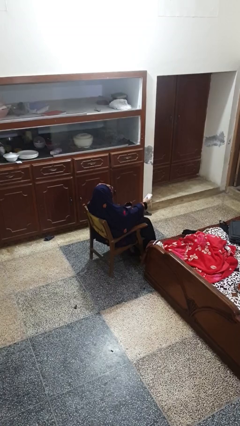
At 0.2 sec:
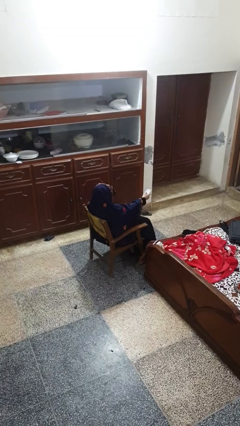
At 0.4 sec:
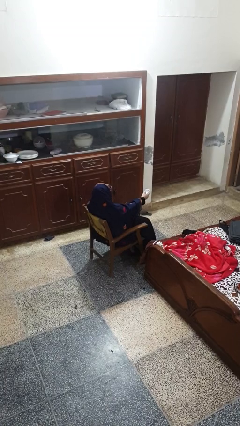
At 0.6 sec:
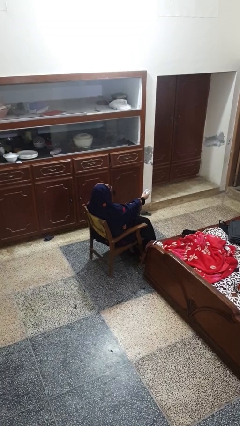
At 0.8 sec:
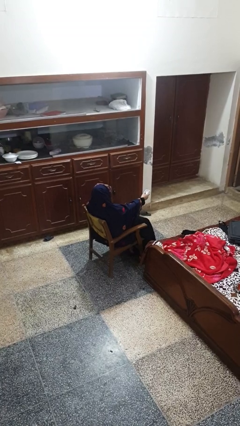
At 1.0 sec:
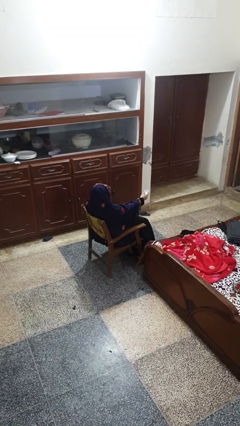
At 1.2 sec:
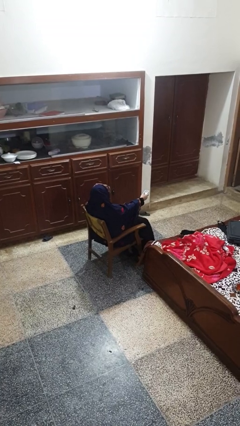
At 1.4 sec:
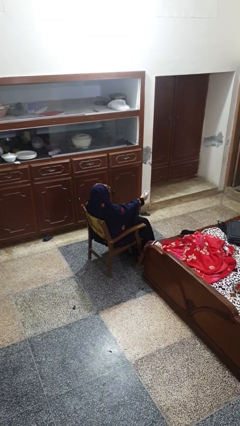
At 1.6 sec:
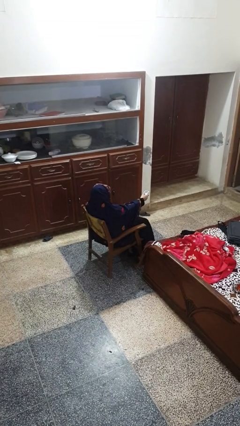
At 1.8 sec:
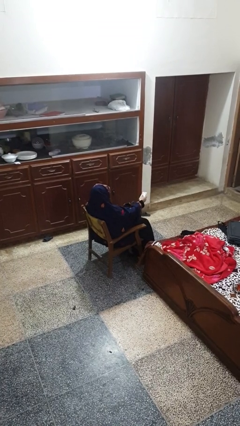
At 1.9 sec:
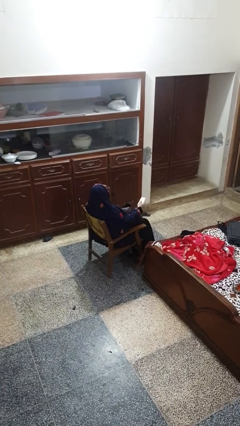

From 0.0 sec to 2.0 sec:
person uses television remote

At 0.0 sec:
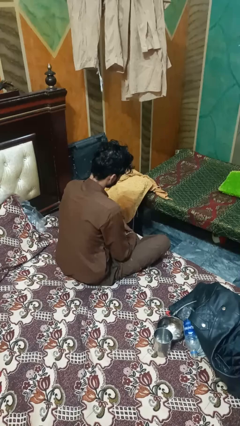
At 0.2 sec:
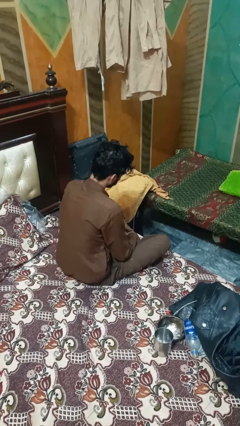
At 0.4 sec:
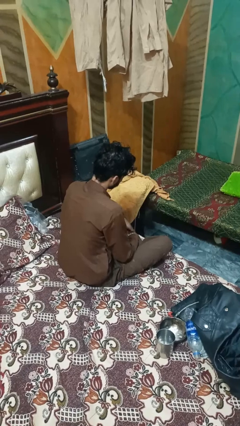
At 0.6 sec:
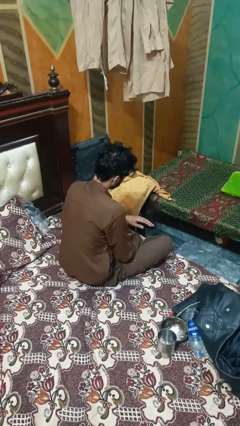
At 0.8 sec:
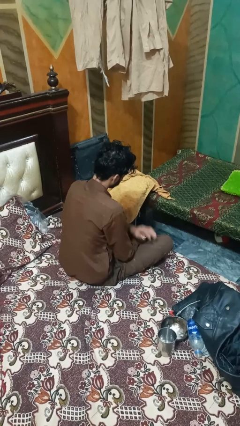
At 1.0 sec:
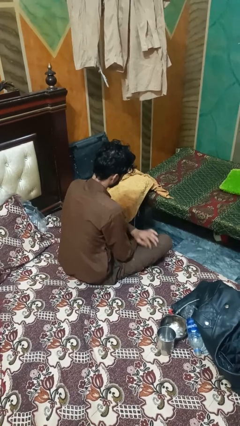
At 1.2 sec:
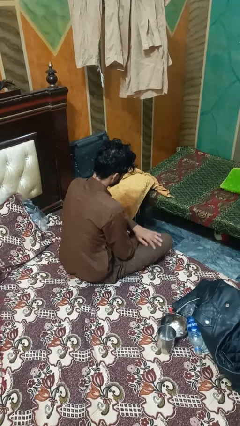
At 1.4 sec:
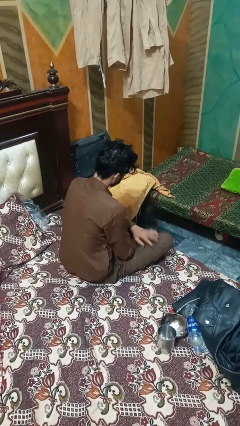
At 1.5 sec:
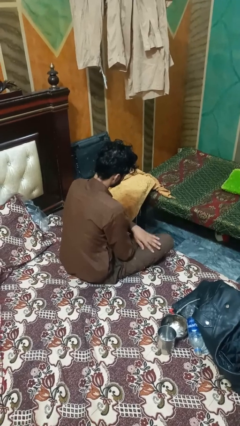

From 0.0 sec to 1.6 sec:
person slaps hands on thighs

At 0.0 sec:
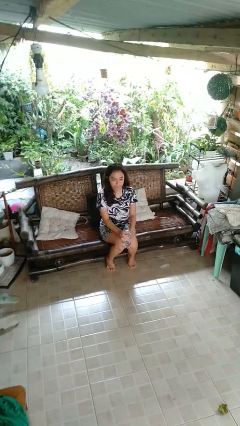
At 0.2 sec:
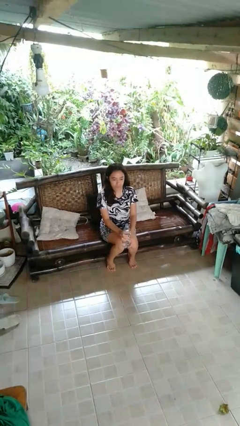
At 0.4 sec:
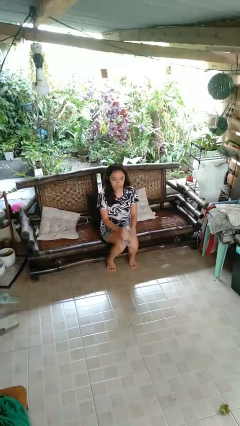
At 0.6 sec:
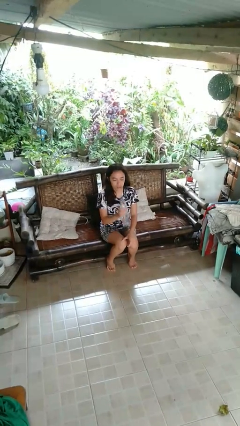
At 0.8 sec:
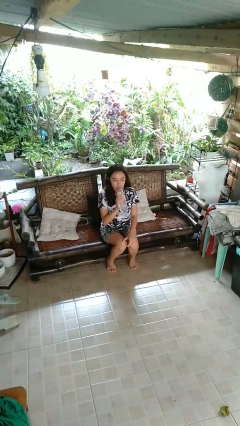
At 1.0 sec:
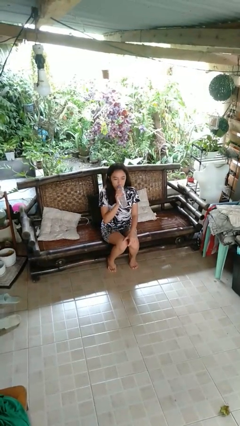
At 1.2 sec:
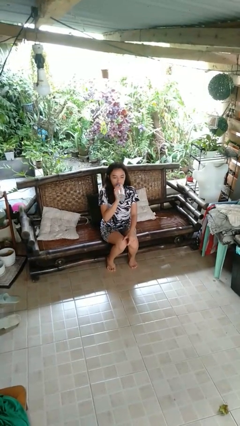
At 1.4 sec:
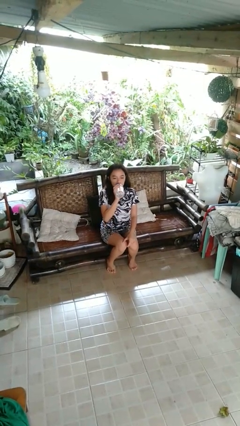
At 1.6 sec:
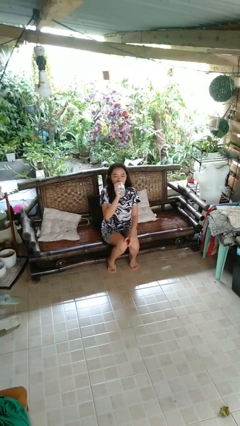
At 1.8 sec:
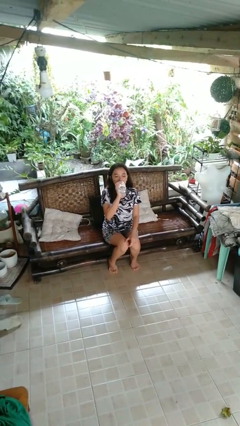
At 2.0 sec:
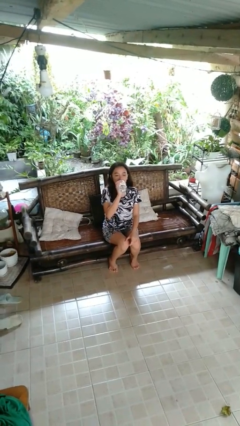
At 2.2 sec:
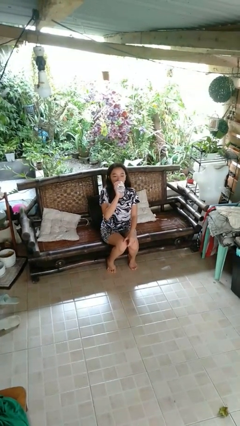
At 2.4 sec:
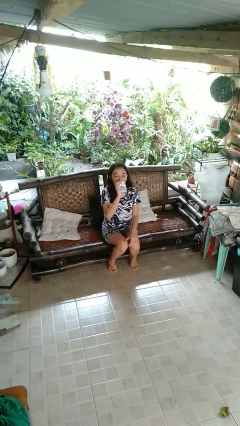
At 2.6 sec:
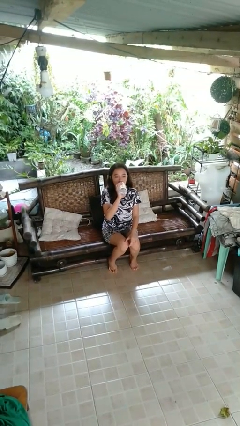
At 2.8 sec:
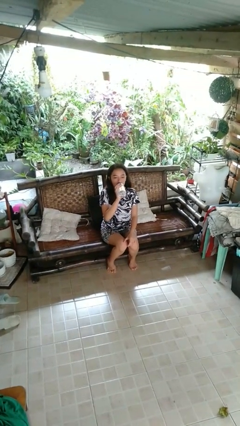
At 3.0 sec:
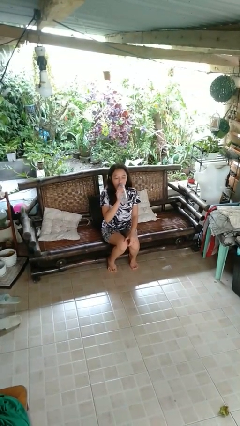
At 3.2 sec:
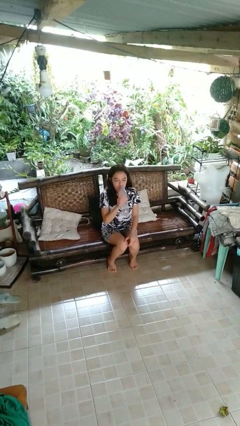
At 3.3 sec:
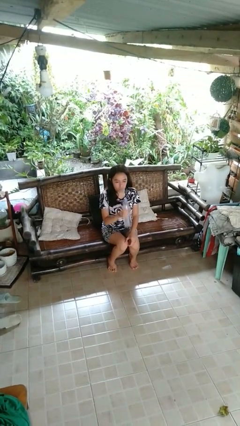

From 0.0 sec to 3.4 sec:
person drinks from bottle

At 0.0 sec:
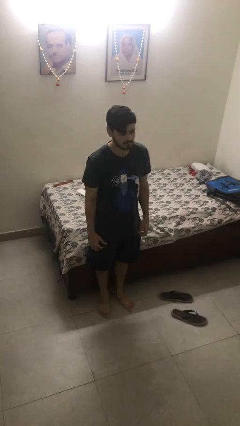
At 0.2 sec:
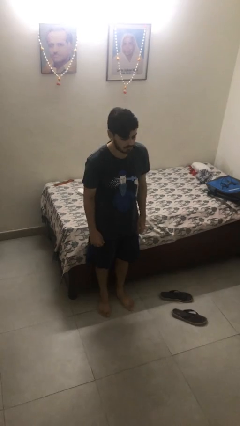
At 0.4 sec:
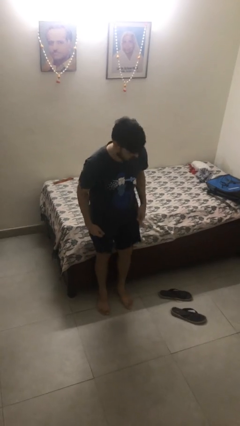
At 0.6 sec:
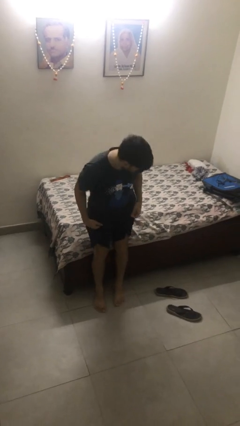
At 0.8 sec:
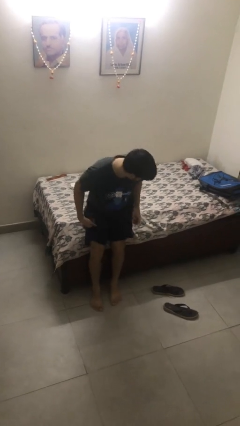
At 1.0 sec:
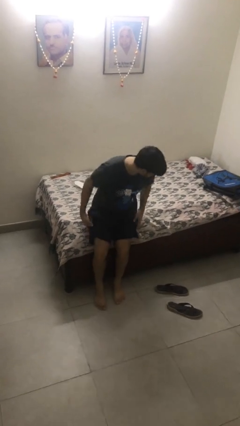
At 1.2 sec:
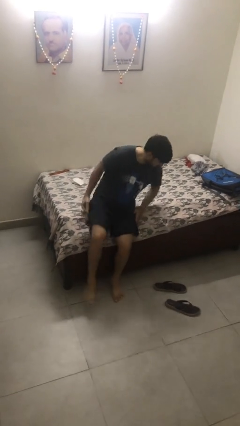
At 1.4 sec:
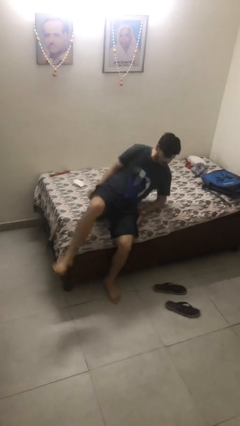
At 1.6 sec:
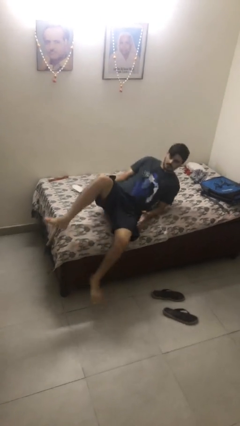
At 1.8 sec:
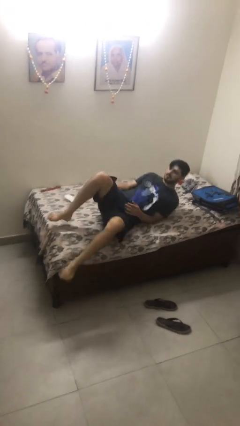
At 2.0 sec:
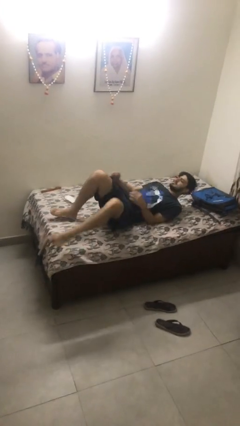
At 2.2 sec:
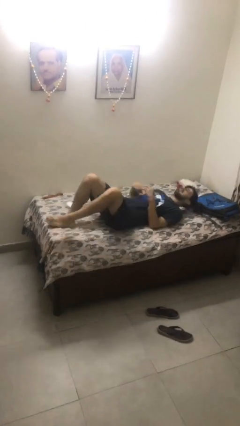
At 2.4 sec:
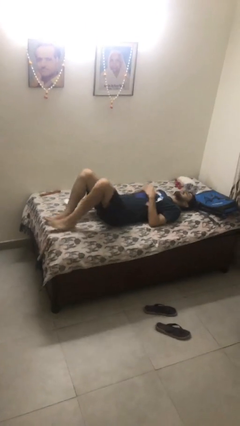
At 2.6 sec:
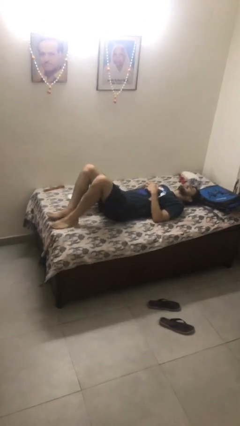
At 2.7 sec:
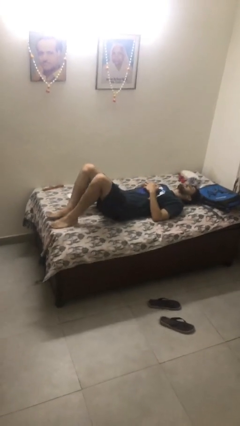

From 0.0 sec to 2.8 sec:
person lies down on bed

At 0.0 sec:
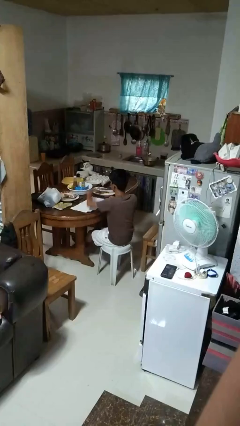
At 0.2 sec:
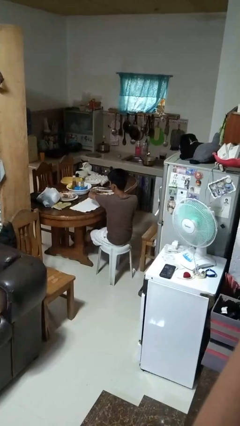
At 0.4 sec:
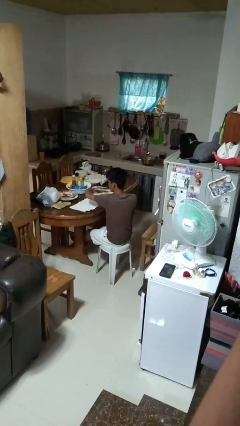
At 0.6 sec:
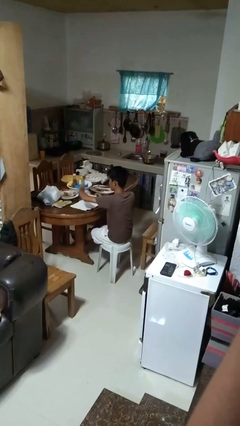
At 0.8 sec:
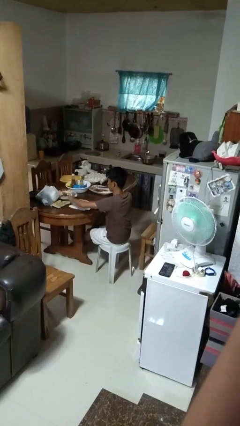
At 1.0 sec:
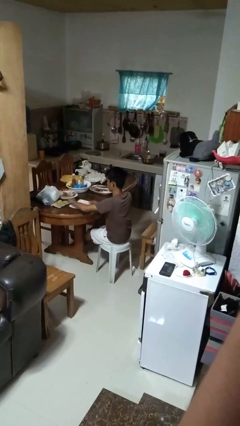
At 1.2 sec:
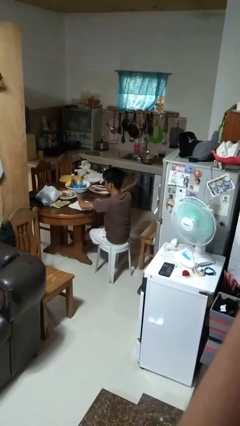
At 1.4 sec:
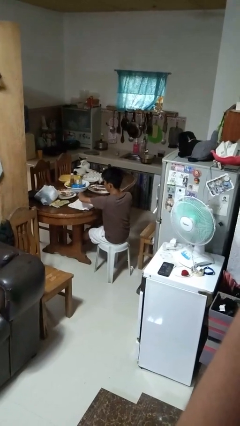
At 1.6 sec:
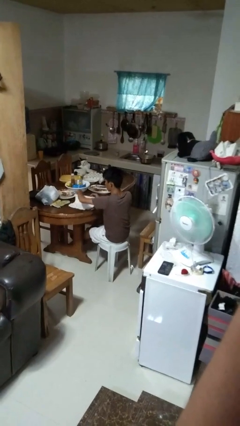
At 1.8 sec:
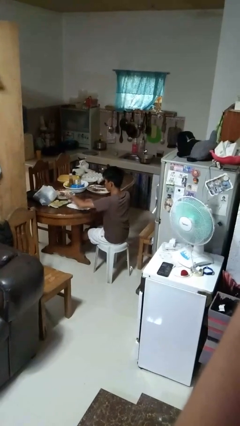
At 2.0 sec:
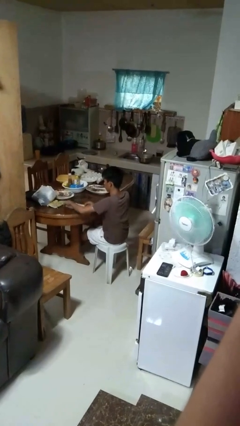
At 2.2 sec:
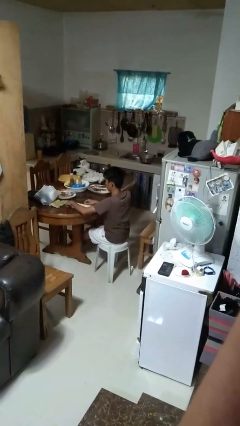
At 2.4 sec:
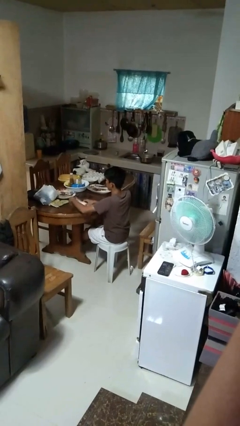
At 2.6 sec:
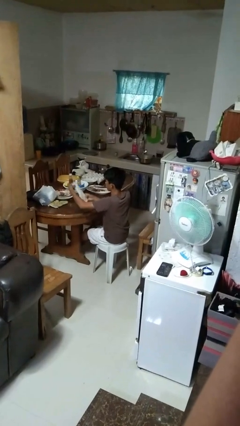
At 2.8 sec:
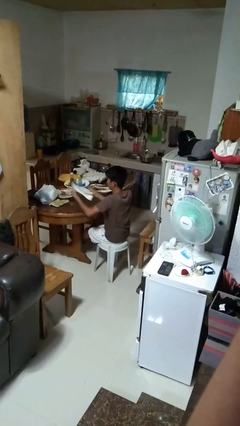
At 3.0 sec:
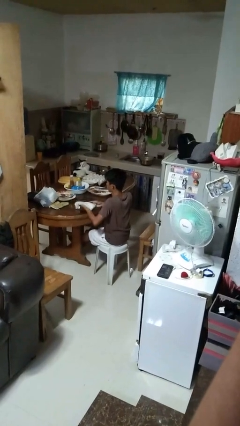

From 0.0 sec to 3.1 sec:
person folds tablecloth

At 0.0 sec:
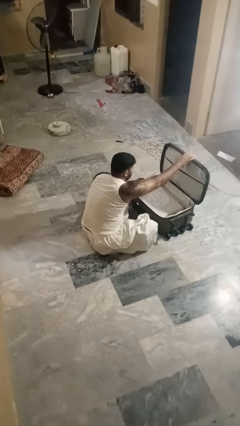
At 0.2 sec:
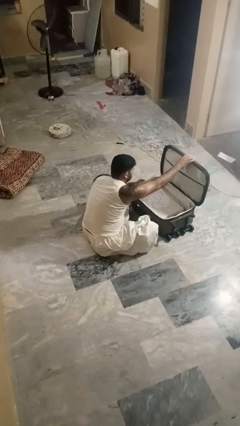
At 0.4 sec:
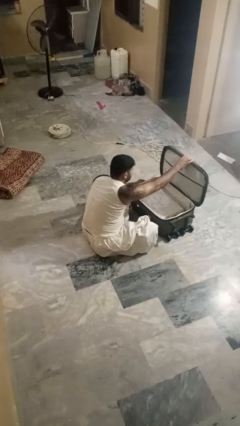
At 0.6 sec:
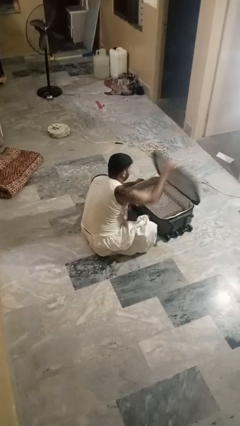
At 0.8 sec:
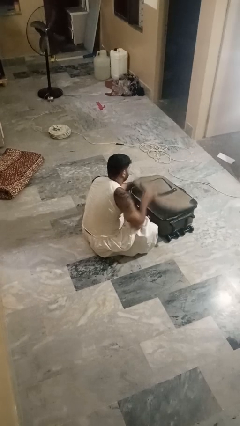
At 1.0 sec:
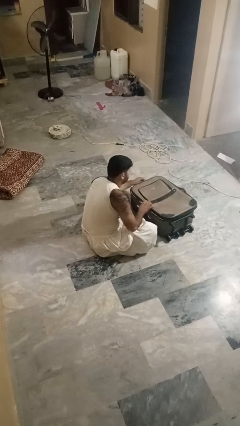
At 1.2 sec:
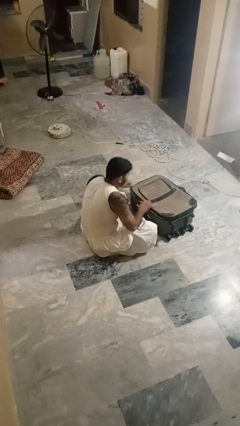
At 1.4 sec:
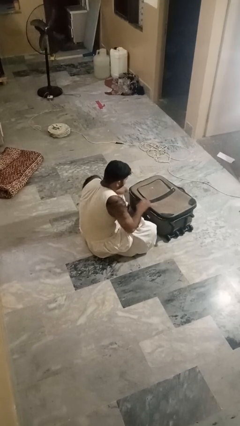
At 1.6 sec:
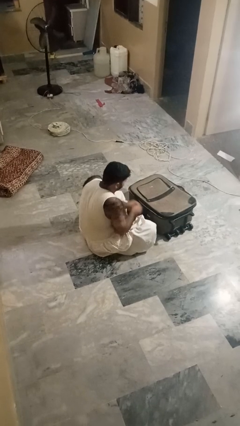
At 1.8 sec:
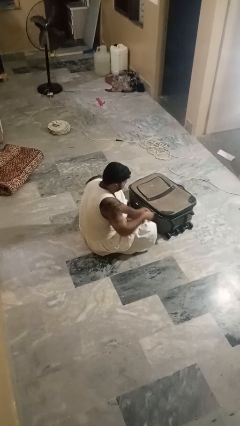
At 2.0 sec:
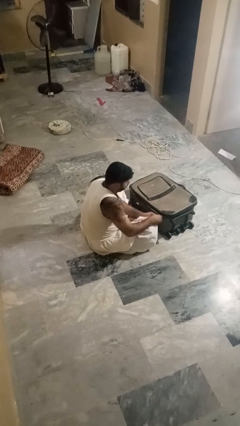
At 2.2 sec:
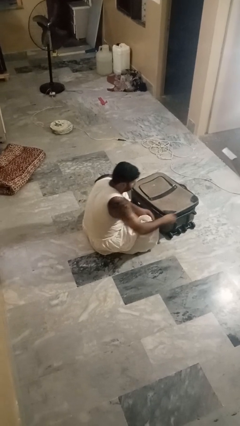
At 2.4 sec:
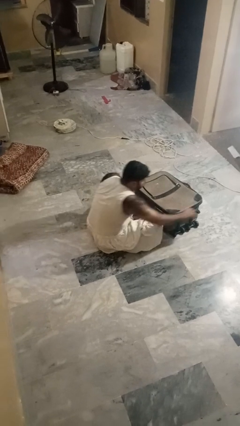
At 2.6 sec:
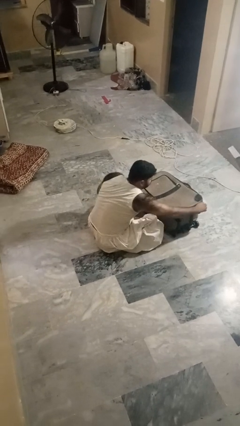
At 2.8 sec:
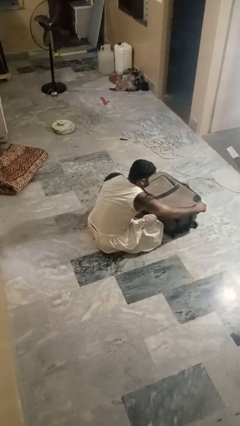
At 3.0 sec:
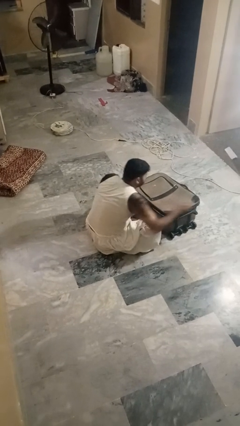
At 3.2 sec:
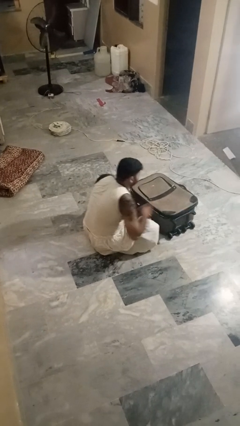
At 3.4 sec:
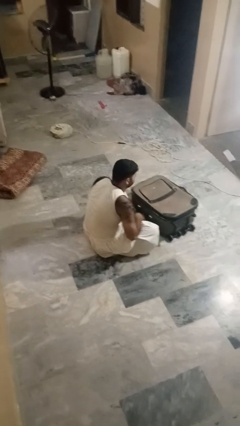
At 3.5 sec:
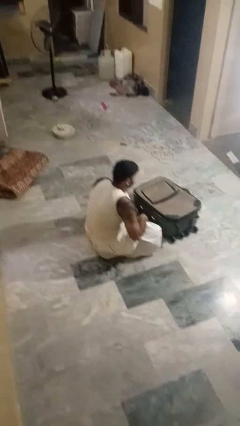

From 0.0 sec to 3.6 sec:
person closes suitcase

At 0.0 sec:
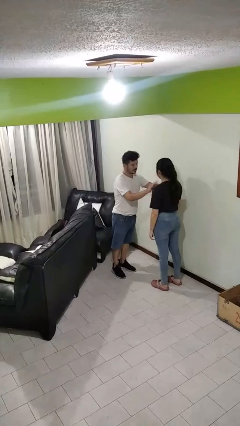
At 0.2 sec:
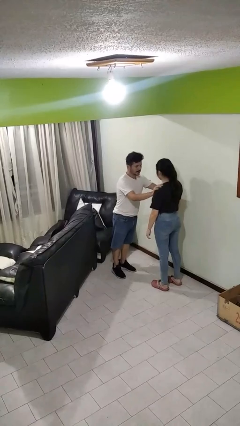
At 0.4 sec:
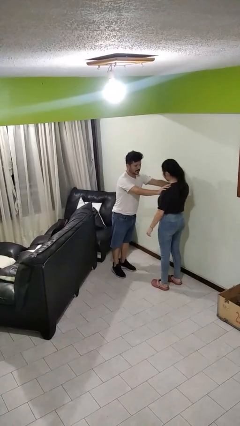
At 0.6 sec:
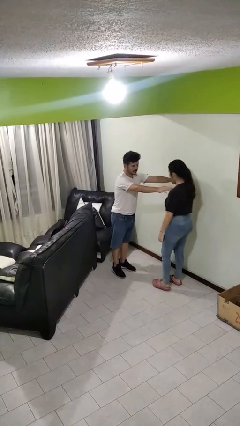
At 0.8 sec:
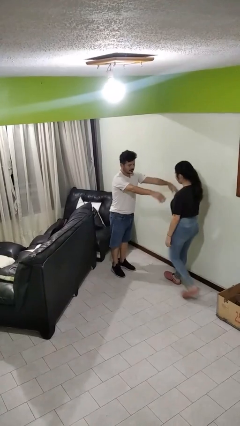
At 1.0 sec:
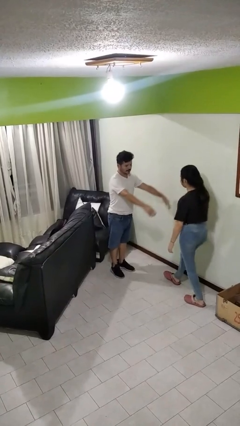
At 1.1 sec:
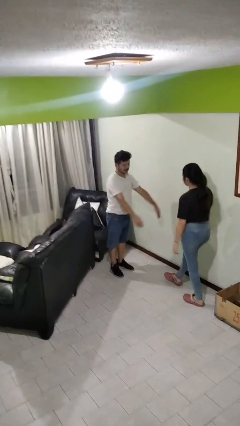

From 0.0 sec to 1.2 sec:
person shoves person
